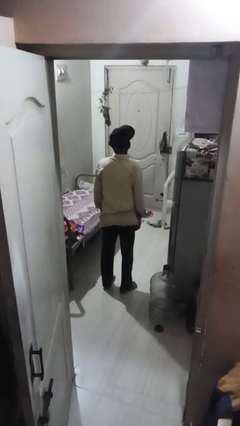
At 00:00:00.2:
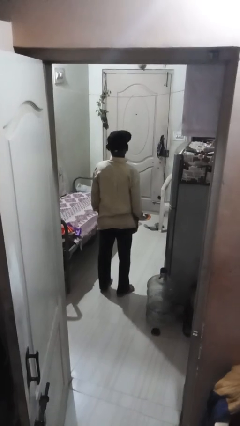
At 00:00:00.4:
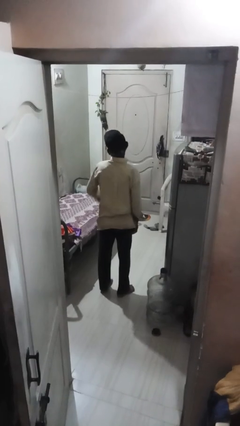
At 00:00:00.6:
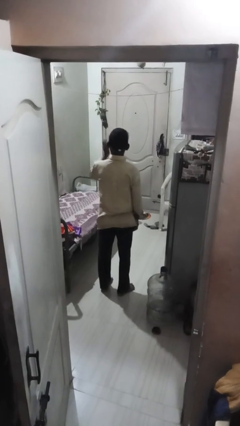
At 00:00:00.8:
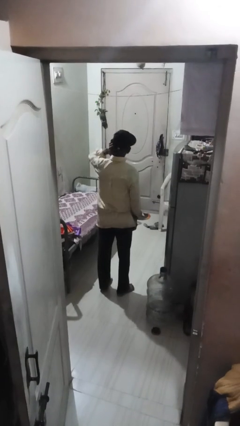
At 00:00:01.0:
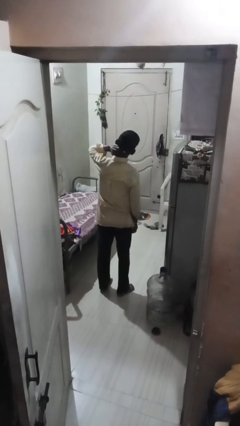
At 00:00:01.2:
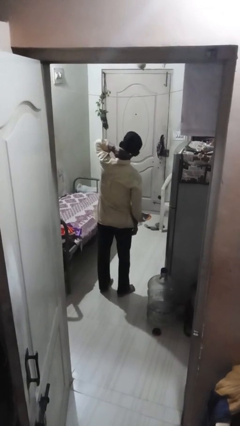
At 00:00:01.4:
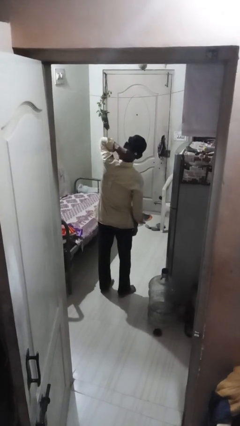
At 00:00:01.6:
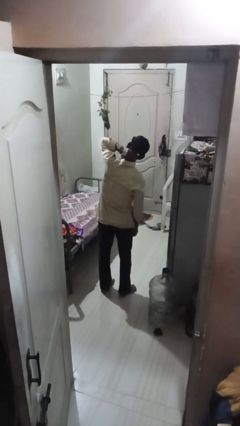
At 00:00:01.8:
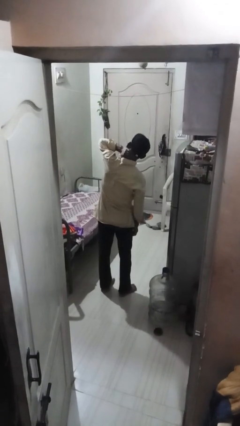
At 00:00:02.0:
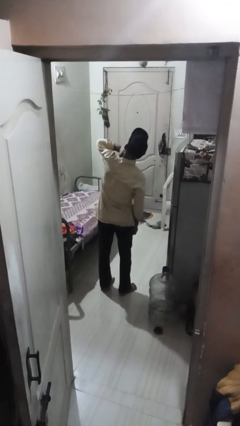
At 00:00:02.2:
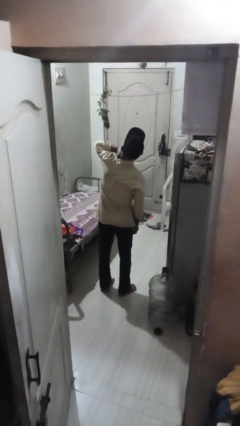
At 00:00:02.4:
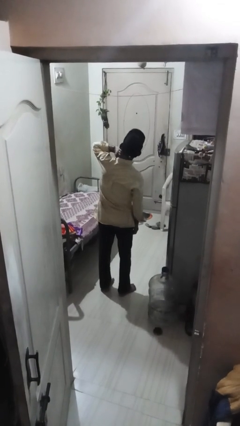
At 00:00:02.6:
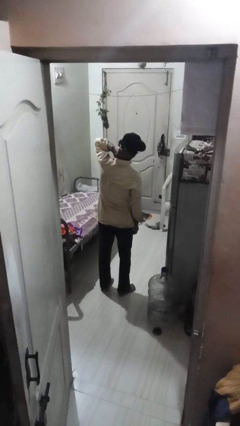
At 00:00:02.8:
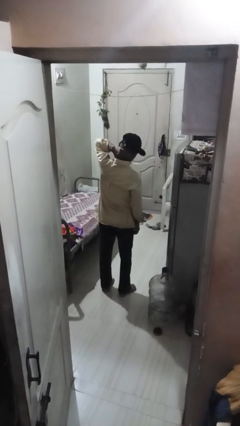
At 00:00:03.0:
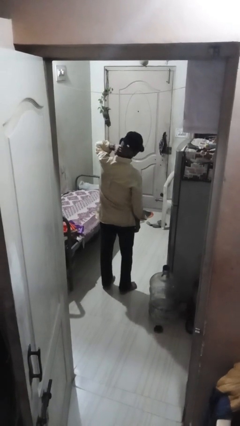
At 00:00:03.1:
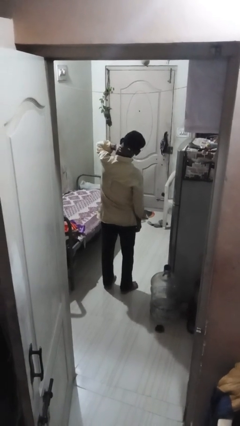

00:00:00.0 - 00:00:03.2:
person rubs neck

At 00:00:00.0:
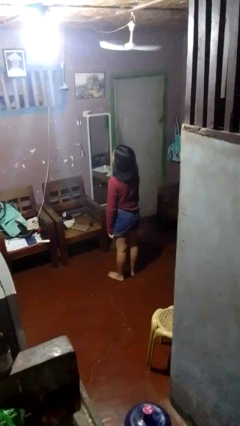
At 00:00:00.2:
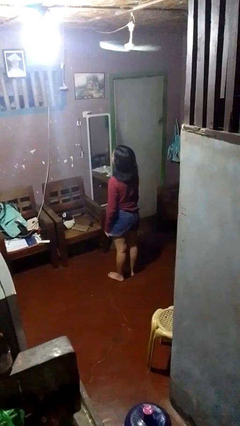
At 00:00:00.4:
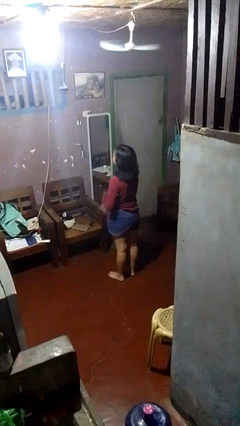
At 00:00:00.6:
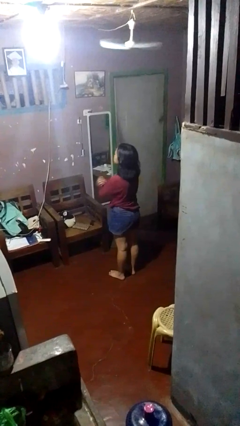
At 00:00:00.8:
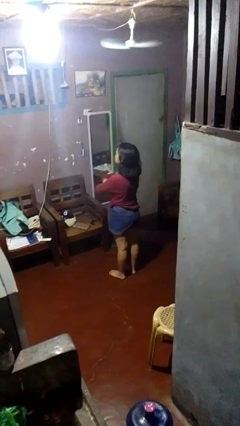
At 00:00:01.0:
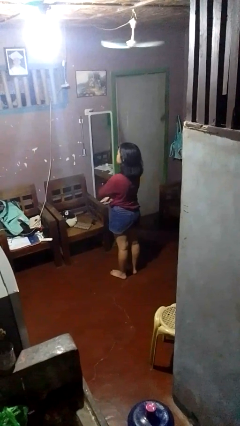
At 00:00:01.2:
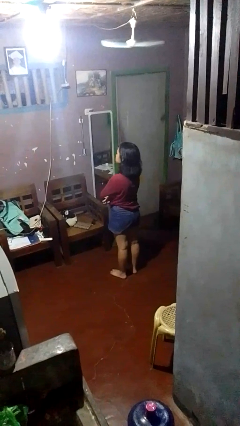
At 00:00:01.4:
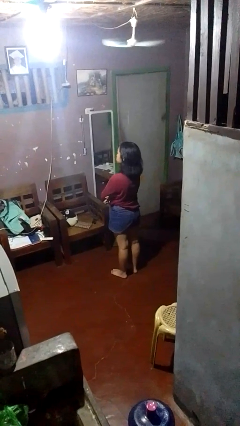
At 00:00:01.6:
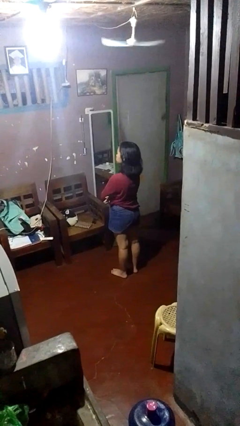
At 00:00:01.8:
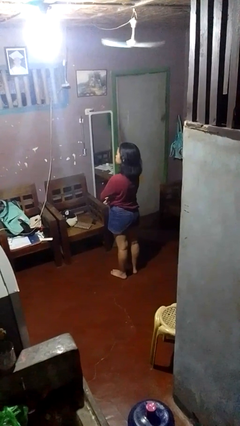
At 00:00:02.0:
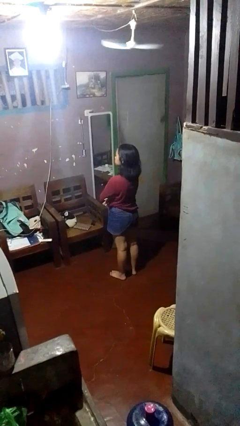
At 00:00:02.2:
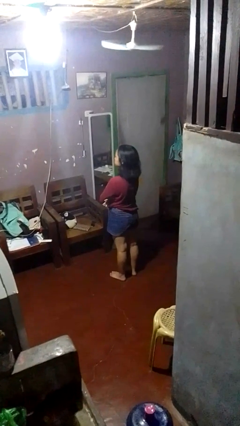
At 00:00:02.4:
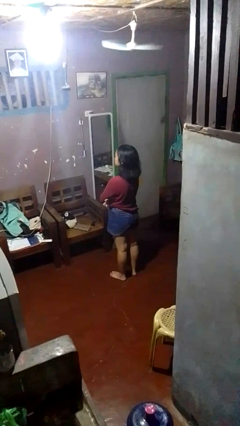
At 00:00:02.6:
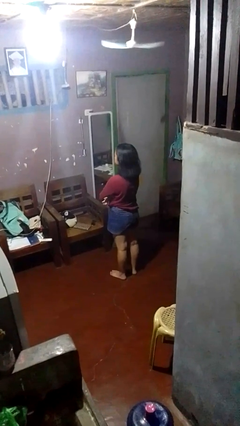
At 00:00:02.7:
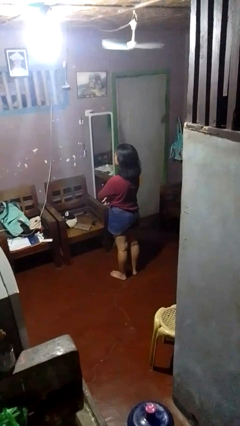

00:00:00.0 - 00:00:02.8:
person crosses arms

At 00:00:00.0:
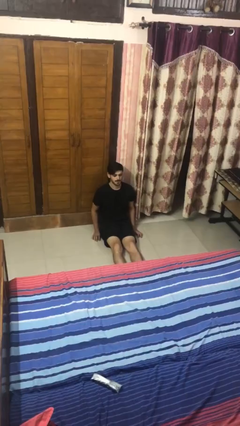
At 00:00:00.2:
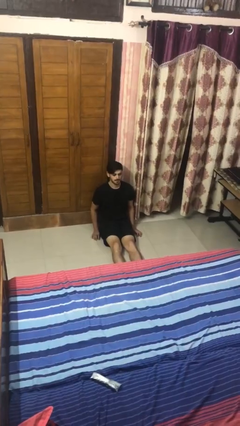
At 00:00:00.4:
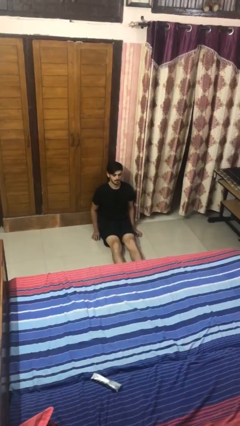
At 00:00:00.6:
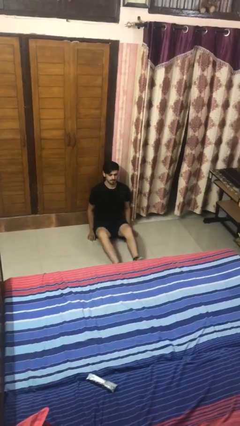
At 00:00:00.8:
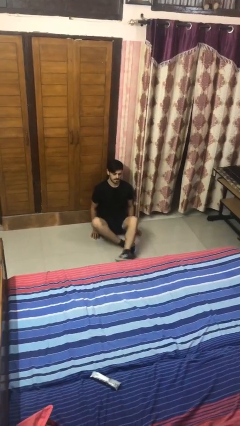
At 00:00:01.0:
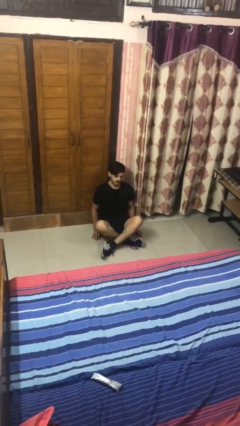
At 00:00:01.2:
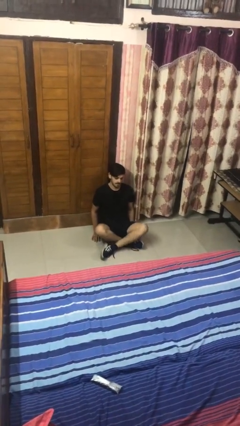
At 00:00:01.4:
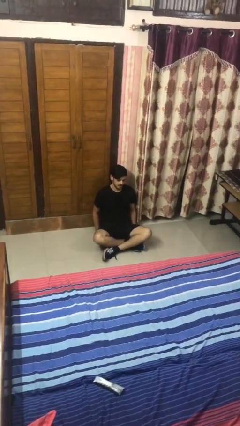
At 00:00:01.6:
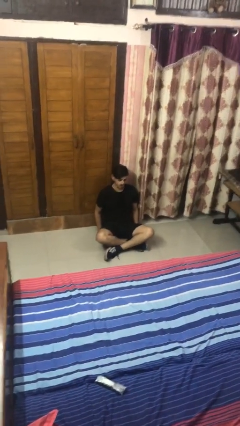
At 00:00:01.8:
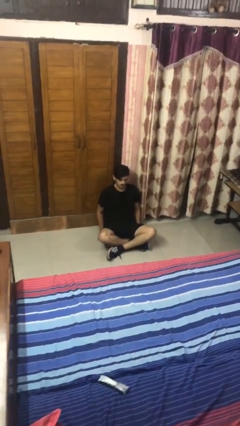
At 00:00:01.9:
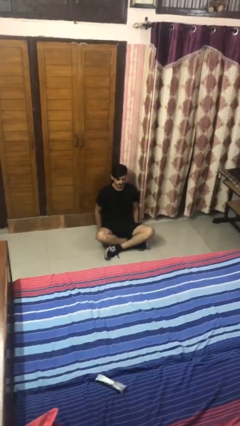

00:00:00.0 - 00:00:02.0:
person crosses legs

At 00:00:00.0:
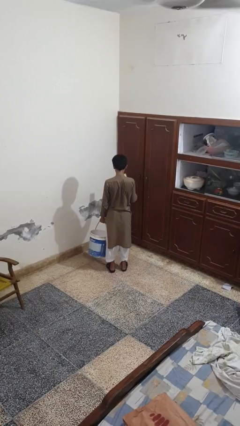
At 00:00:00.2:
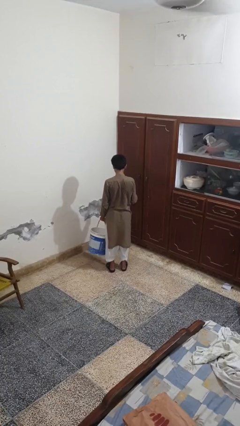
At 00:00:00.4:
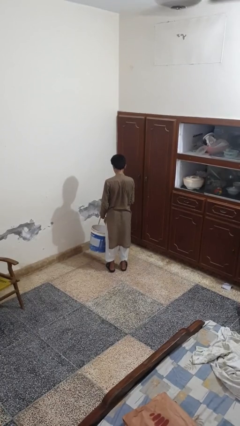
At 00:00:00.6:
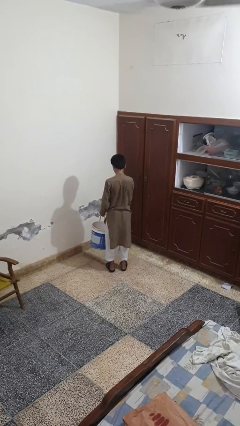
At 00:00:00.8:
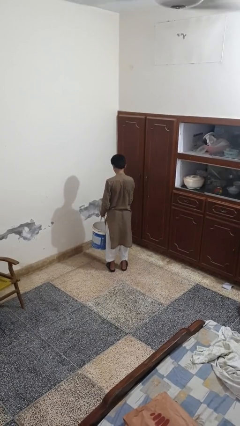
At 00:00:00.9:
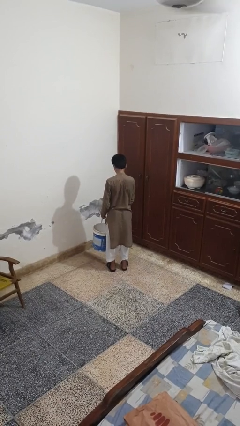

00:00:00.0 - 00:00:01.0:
person puts object into basket

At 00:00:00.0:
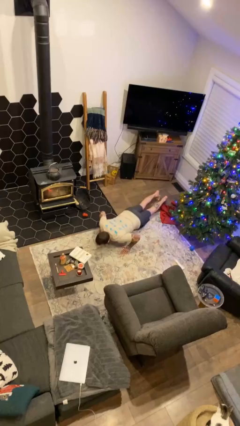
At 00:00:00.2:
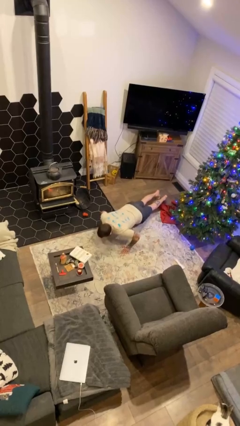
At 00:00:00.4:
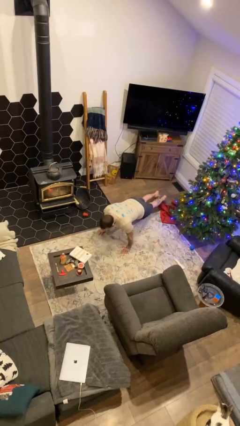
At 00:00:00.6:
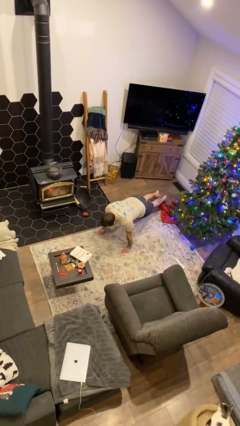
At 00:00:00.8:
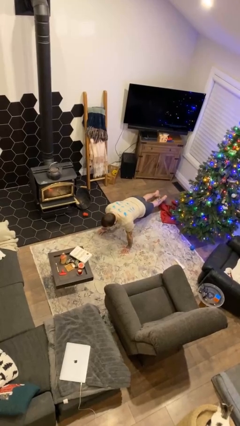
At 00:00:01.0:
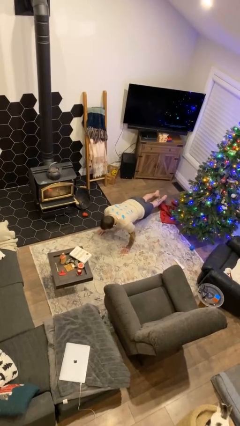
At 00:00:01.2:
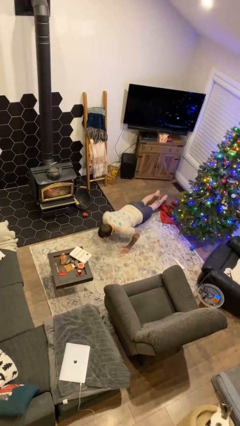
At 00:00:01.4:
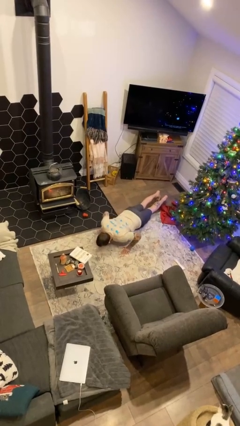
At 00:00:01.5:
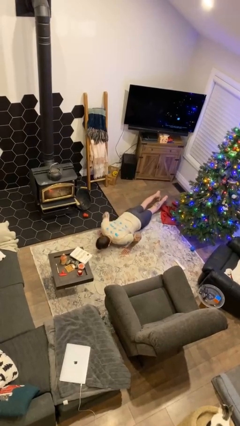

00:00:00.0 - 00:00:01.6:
person exercises with pushup

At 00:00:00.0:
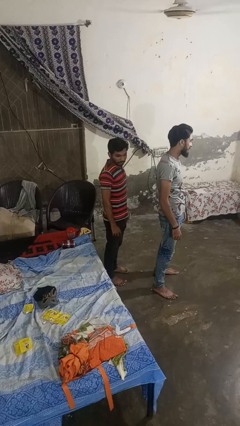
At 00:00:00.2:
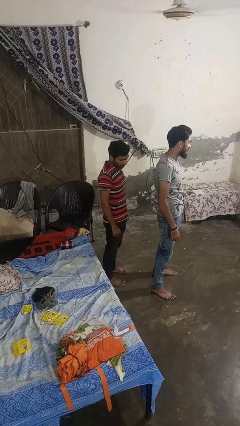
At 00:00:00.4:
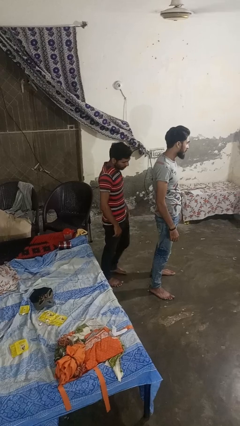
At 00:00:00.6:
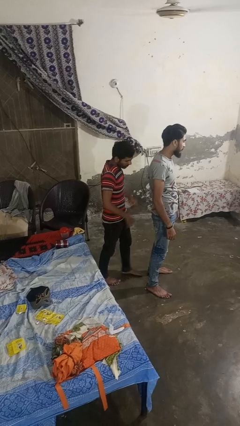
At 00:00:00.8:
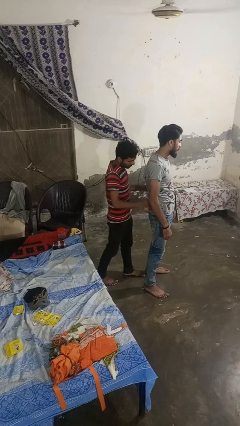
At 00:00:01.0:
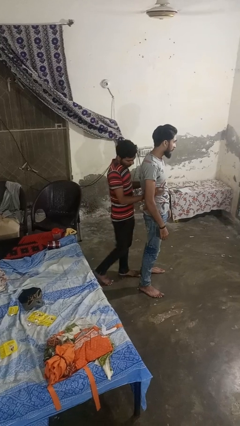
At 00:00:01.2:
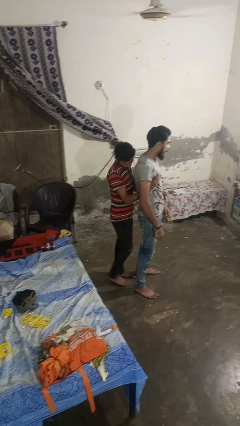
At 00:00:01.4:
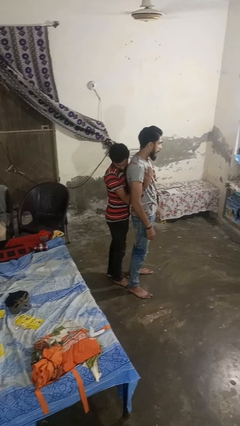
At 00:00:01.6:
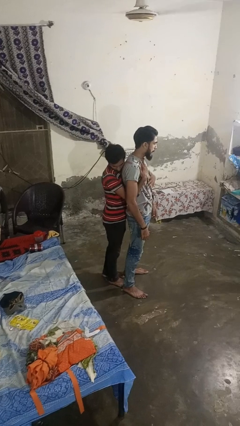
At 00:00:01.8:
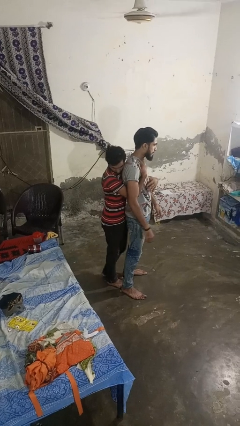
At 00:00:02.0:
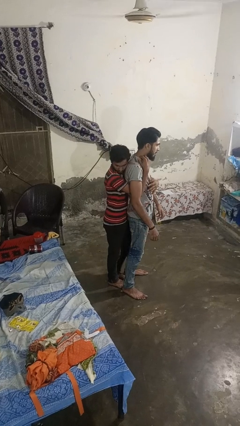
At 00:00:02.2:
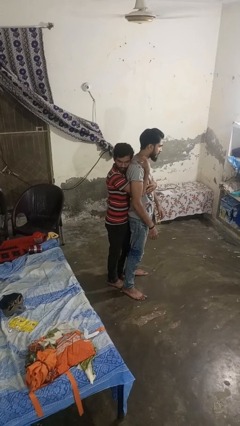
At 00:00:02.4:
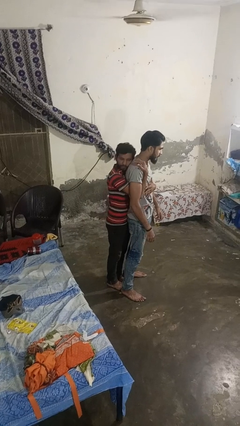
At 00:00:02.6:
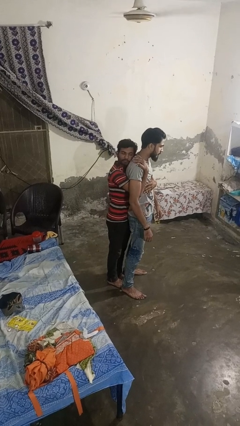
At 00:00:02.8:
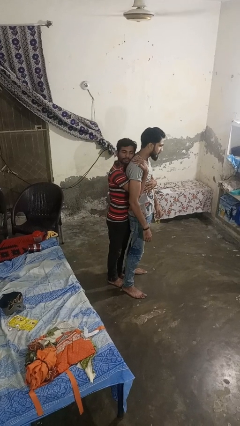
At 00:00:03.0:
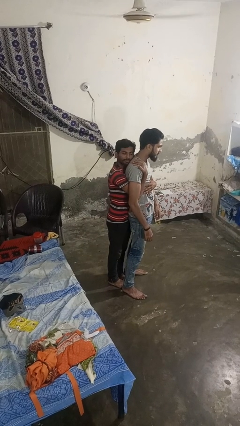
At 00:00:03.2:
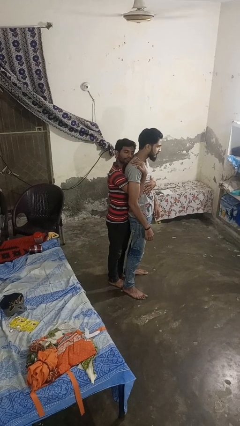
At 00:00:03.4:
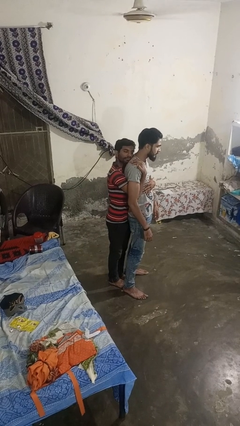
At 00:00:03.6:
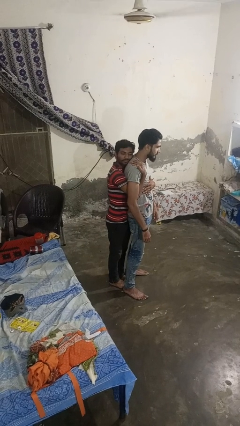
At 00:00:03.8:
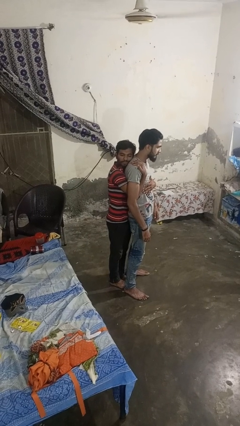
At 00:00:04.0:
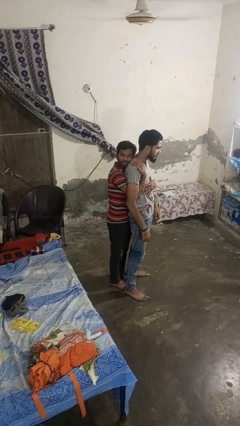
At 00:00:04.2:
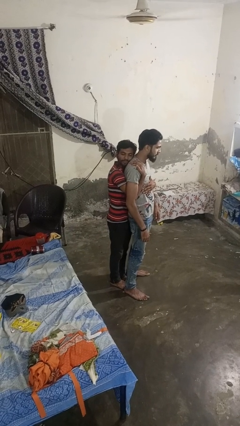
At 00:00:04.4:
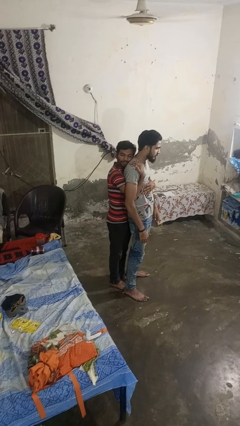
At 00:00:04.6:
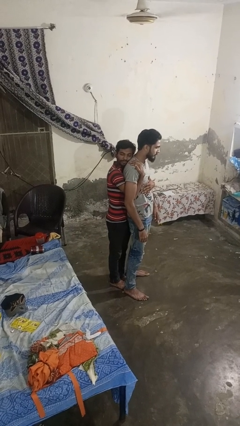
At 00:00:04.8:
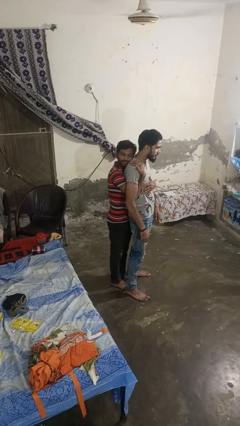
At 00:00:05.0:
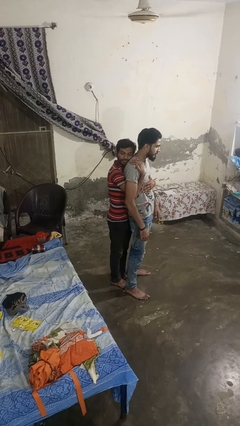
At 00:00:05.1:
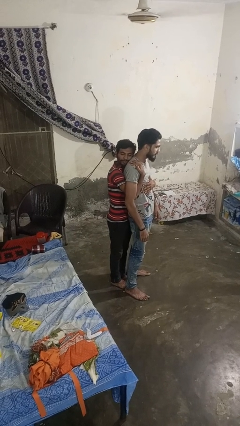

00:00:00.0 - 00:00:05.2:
person hugs person from behind

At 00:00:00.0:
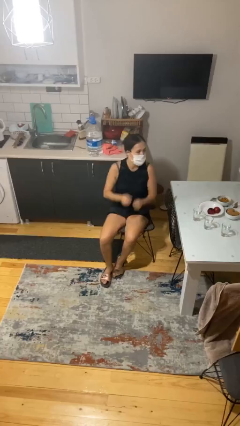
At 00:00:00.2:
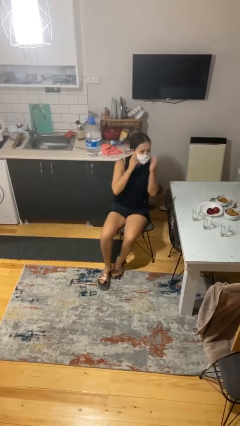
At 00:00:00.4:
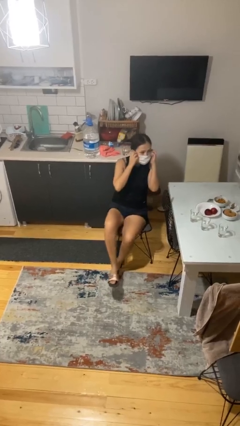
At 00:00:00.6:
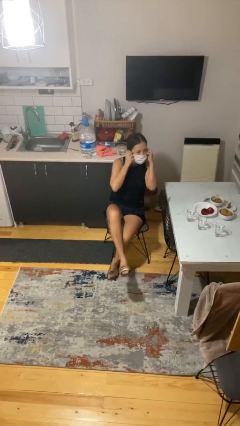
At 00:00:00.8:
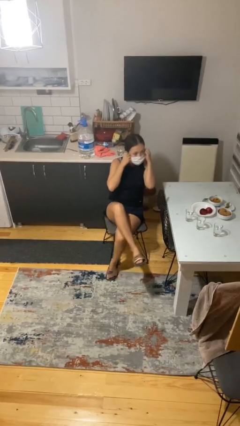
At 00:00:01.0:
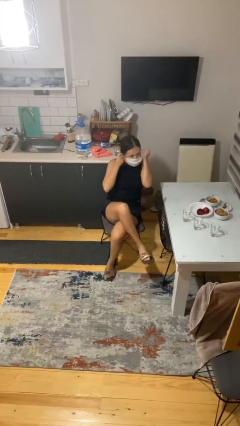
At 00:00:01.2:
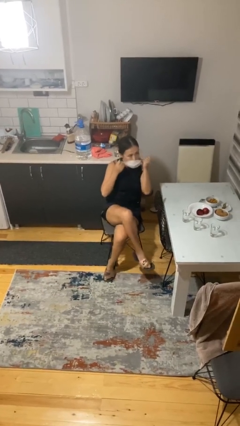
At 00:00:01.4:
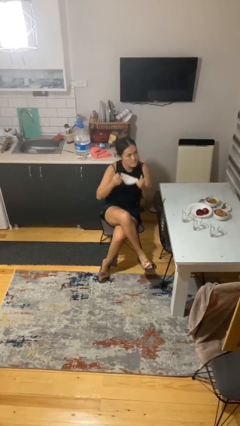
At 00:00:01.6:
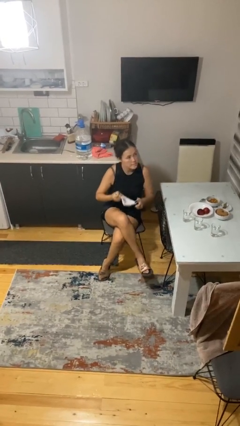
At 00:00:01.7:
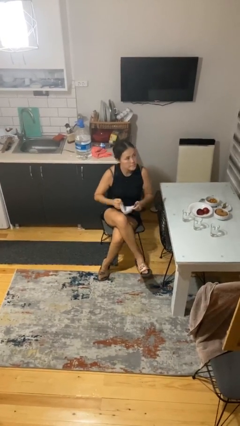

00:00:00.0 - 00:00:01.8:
person takes off facemask
